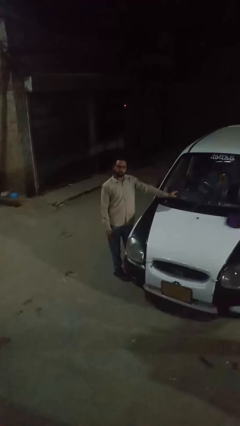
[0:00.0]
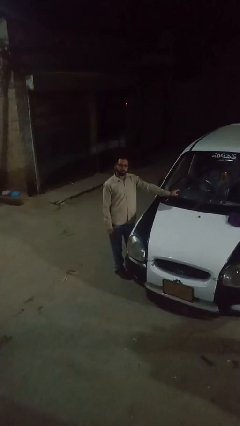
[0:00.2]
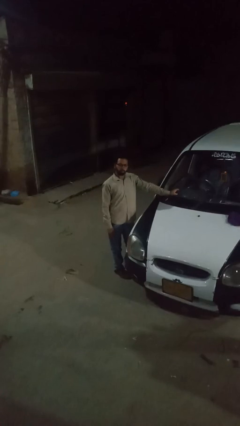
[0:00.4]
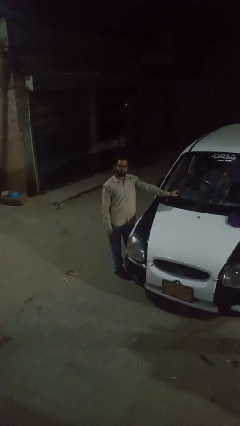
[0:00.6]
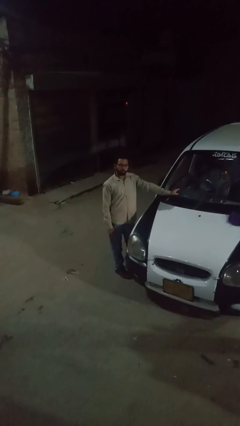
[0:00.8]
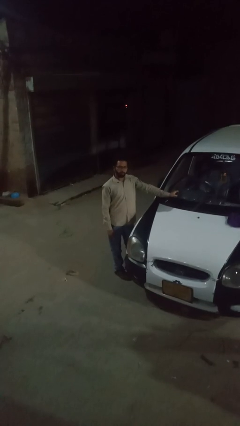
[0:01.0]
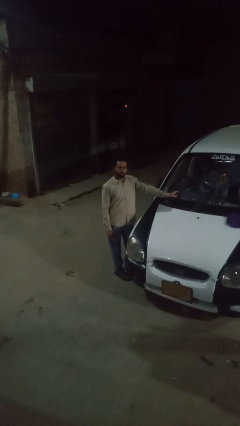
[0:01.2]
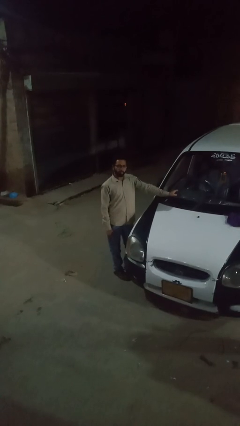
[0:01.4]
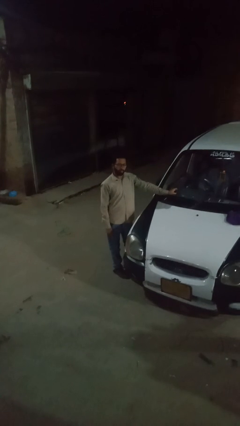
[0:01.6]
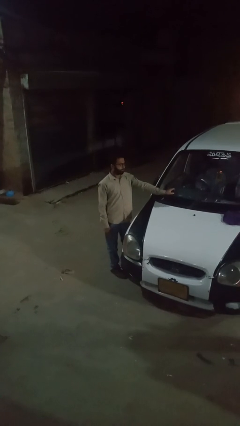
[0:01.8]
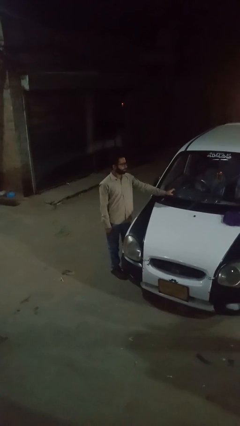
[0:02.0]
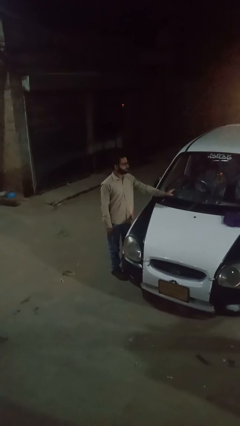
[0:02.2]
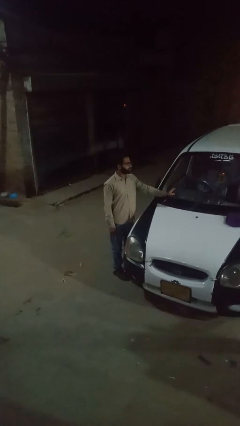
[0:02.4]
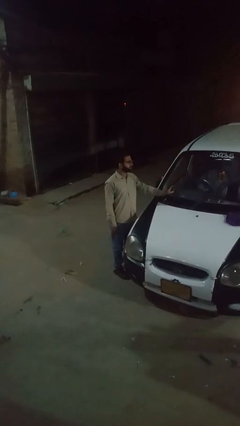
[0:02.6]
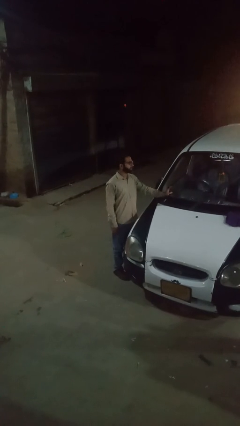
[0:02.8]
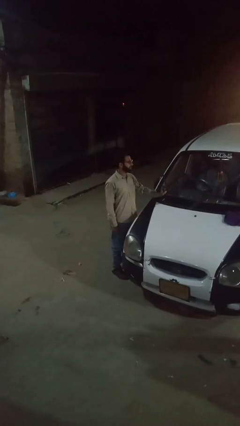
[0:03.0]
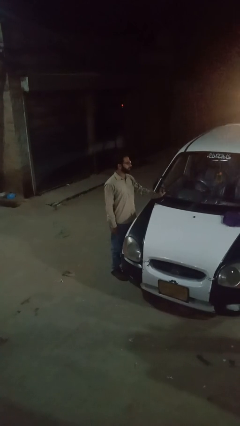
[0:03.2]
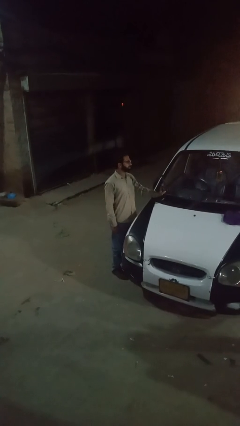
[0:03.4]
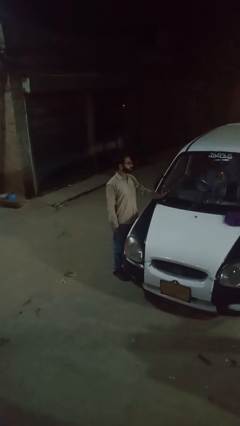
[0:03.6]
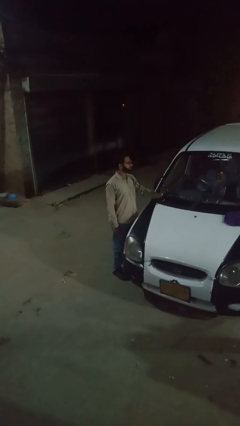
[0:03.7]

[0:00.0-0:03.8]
person flips up car wipers

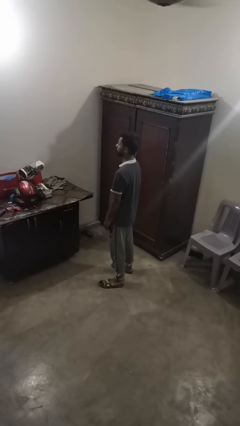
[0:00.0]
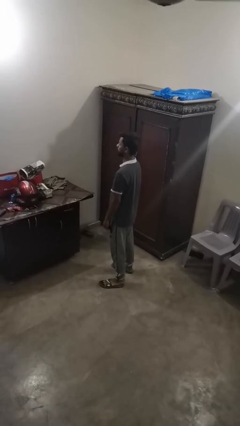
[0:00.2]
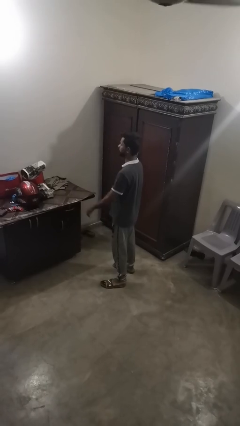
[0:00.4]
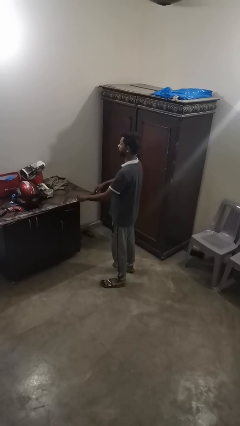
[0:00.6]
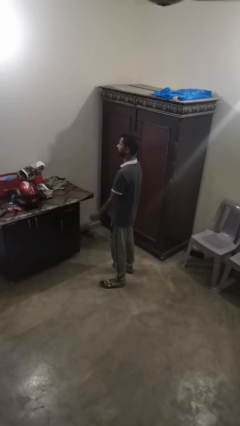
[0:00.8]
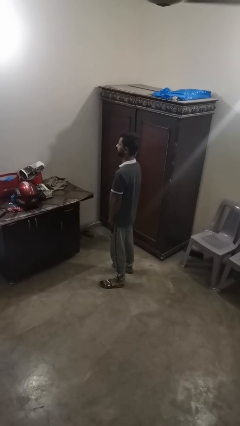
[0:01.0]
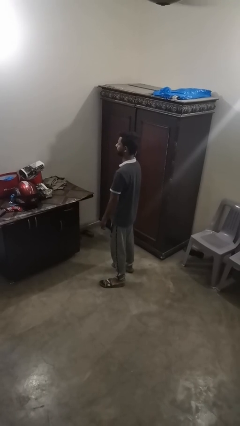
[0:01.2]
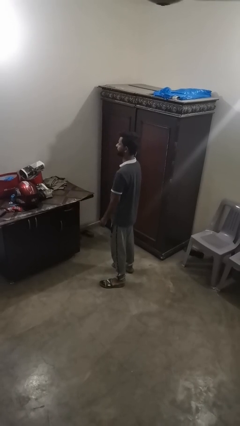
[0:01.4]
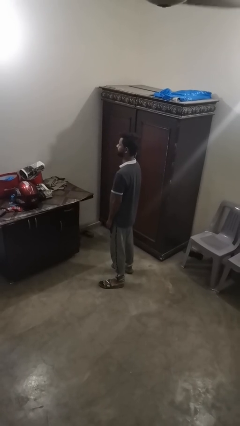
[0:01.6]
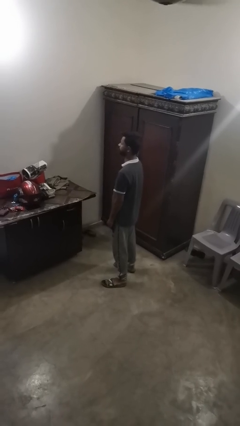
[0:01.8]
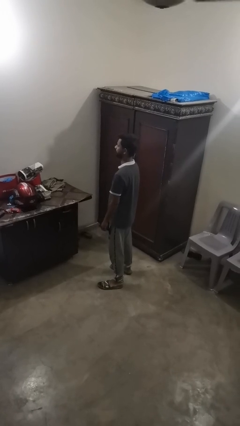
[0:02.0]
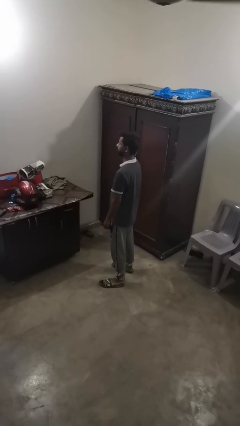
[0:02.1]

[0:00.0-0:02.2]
person slaps hands on thighs

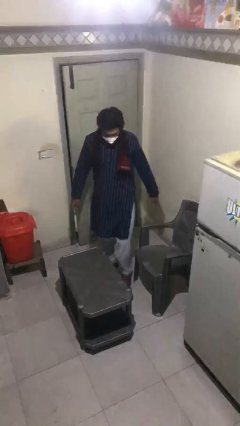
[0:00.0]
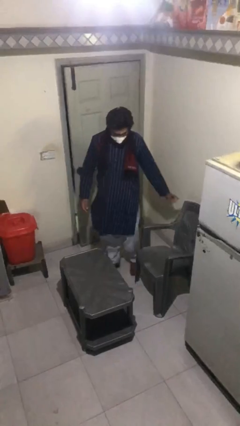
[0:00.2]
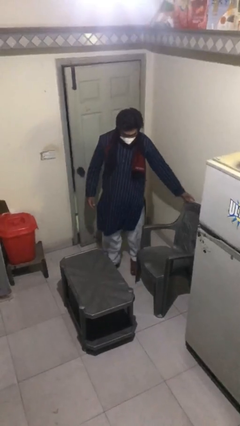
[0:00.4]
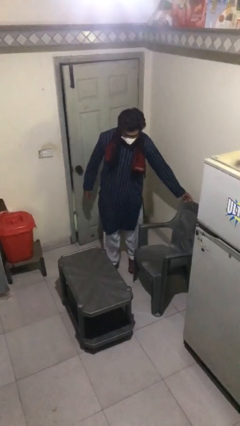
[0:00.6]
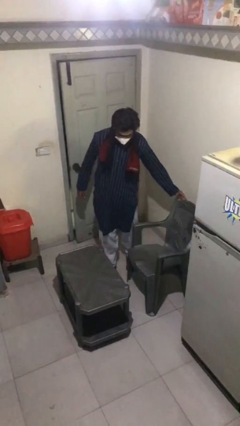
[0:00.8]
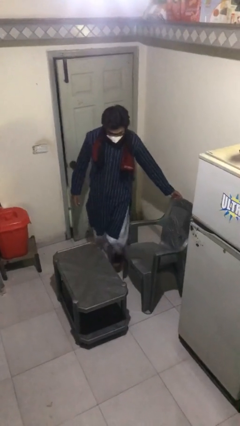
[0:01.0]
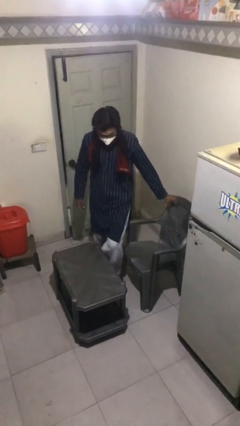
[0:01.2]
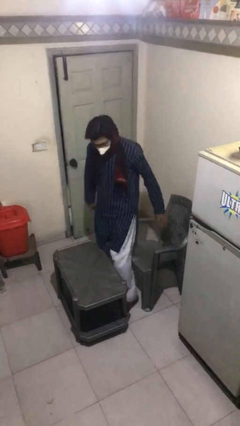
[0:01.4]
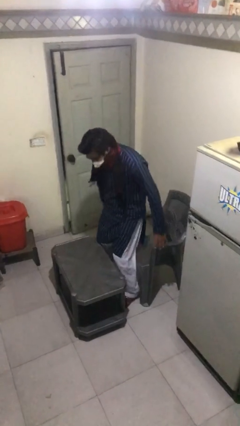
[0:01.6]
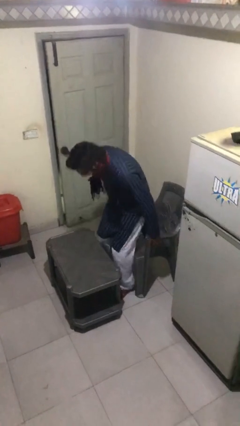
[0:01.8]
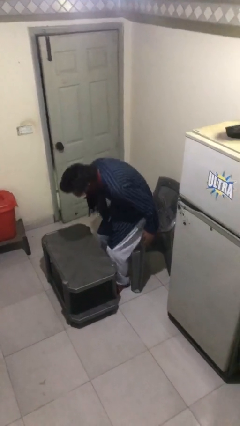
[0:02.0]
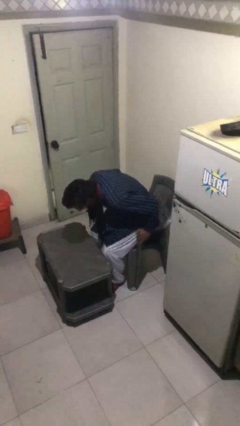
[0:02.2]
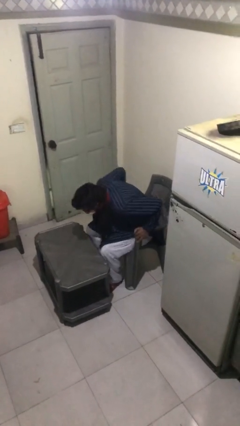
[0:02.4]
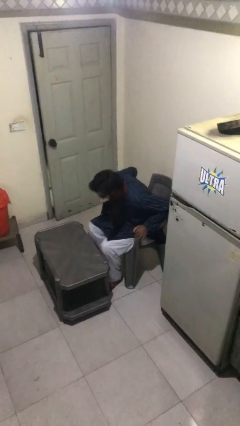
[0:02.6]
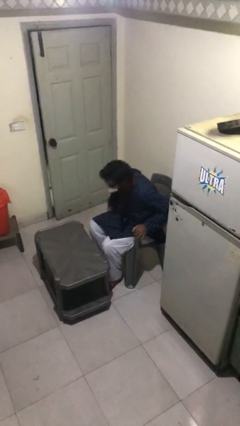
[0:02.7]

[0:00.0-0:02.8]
person sits down

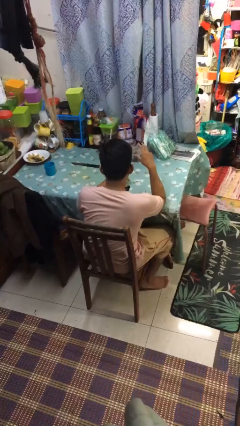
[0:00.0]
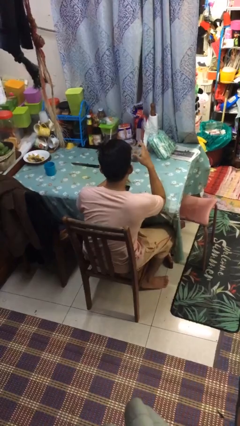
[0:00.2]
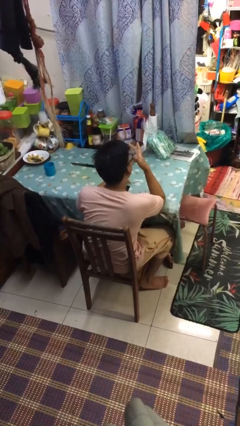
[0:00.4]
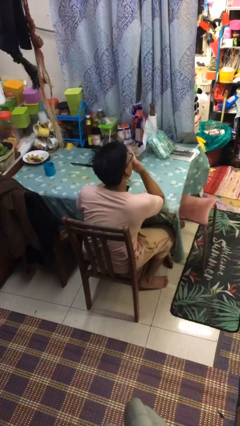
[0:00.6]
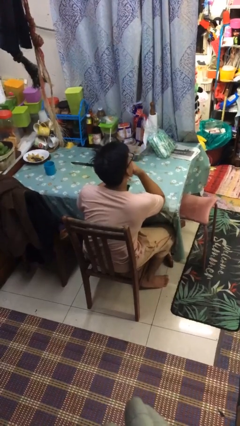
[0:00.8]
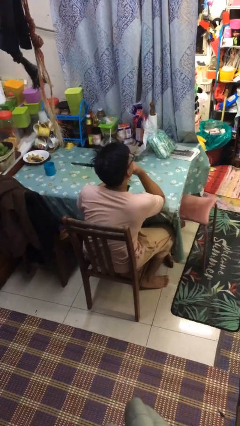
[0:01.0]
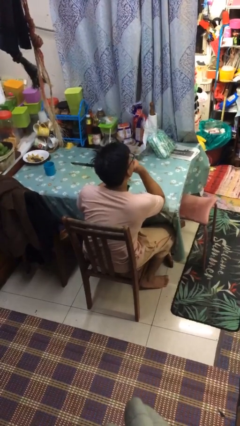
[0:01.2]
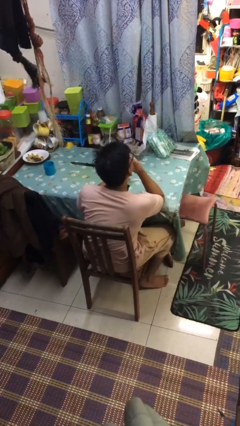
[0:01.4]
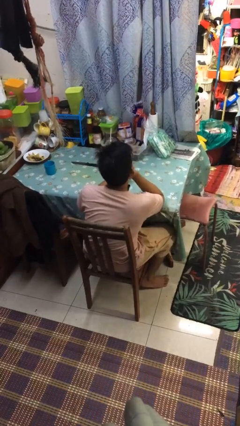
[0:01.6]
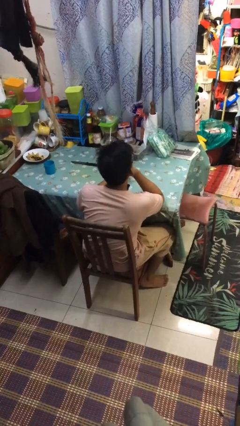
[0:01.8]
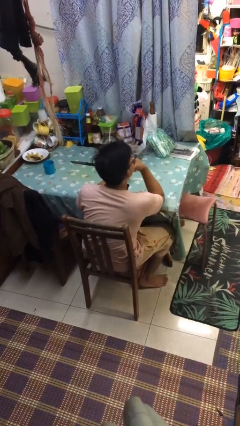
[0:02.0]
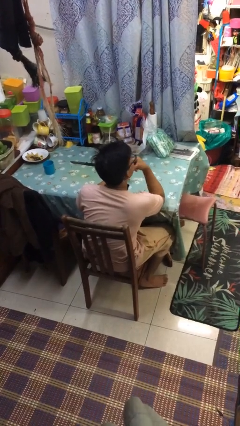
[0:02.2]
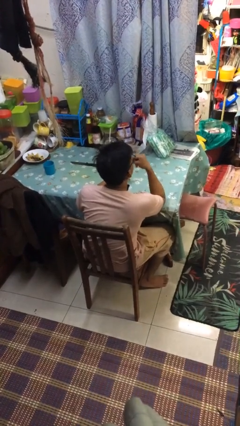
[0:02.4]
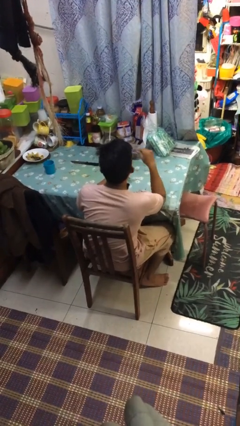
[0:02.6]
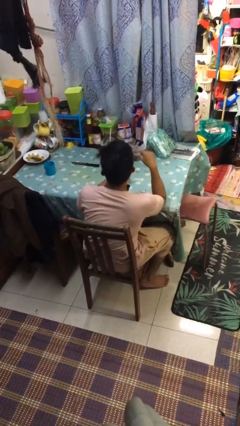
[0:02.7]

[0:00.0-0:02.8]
person strokes chin

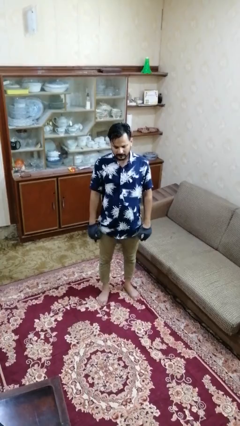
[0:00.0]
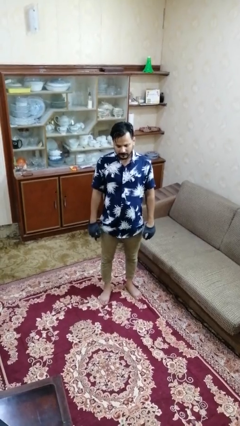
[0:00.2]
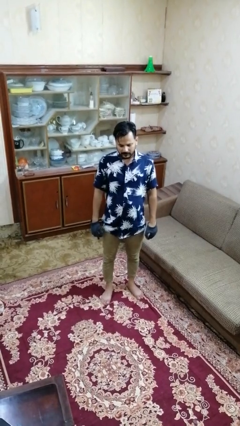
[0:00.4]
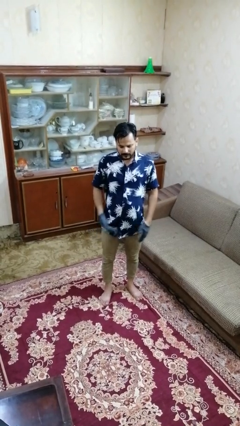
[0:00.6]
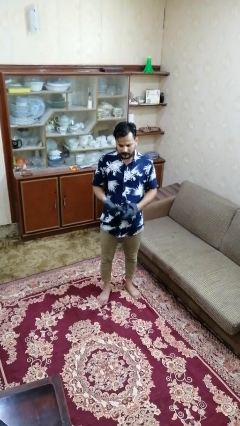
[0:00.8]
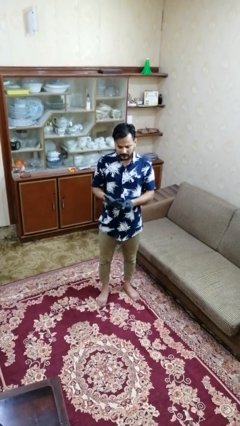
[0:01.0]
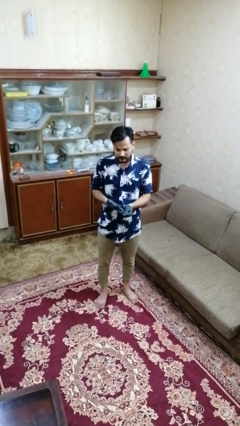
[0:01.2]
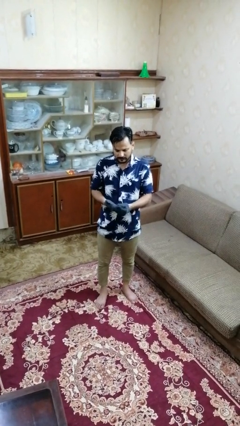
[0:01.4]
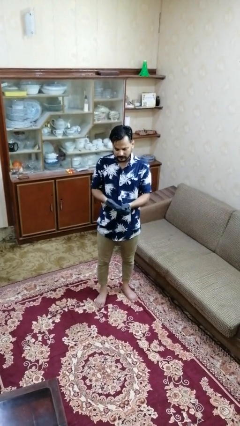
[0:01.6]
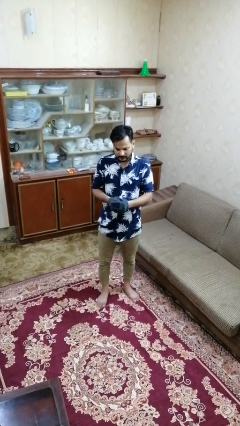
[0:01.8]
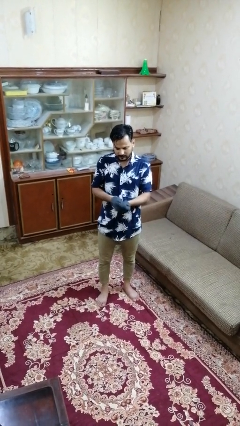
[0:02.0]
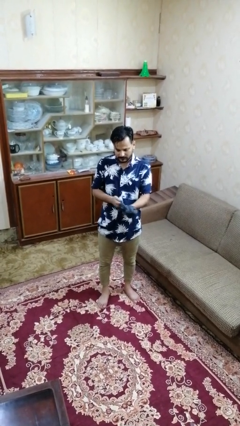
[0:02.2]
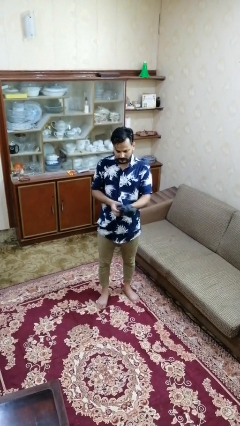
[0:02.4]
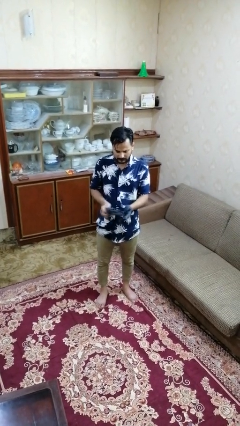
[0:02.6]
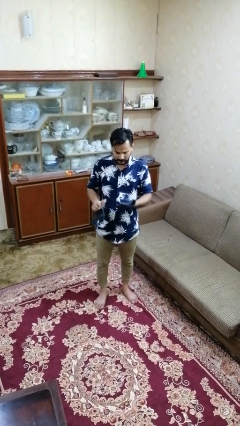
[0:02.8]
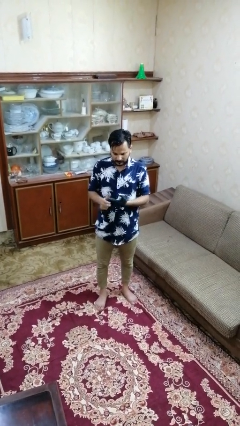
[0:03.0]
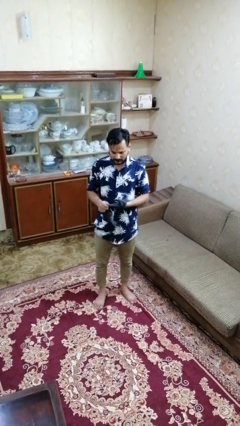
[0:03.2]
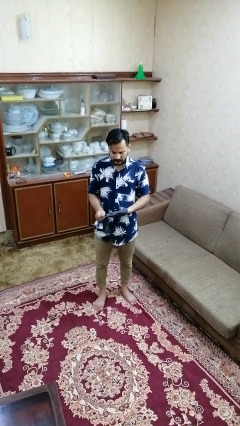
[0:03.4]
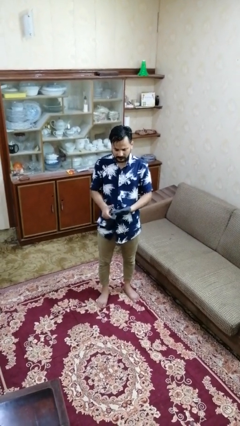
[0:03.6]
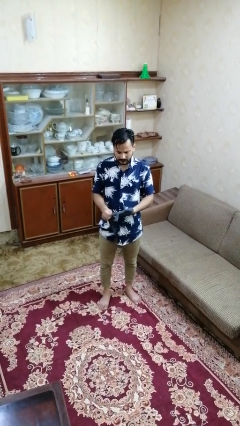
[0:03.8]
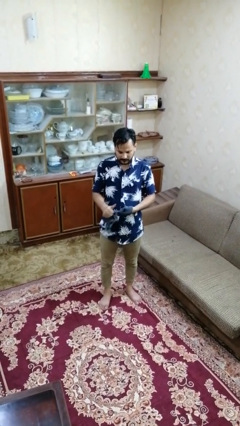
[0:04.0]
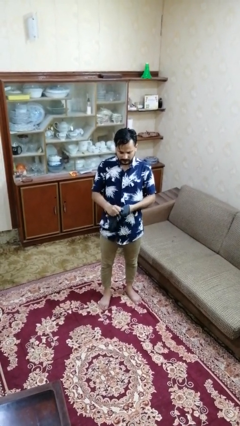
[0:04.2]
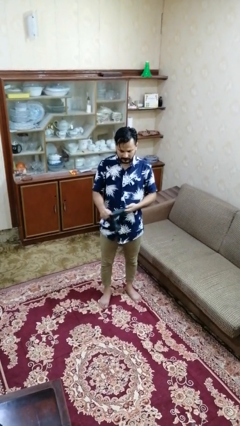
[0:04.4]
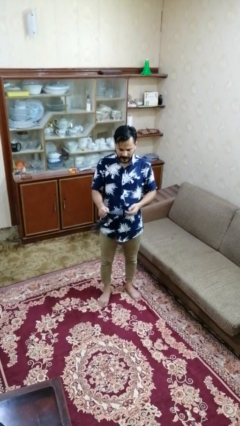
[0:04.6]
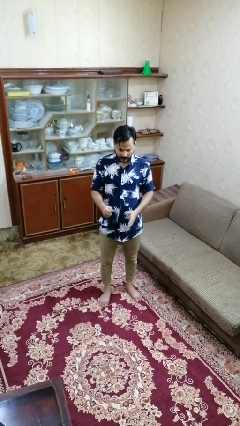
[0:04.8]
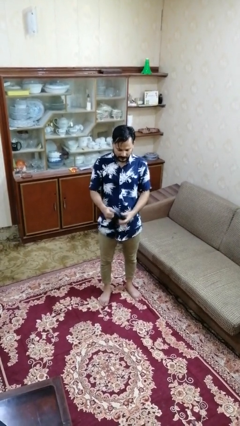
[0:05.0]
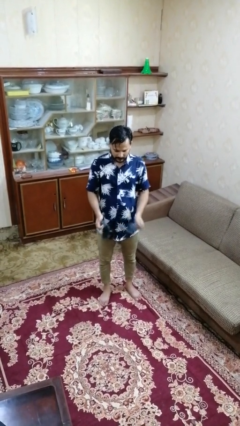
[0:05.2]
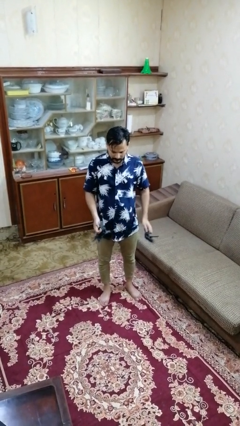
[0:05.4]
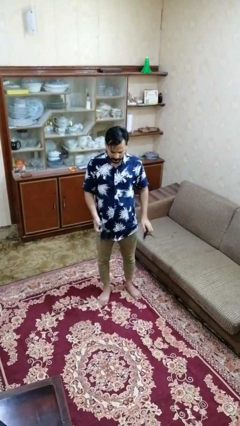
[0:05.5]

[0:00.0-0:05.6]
person takes off gloves

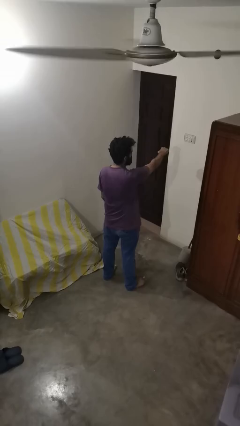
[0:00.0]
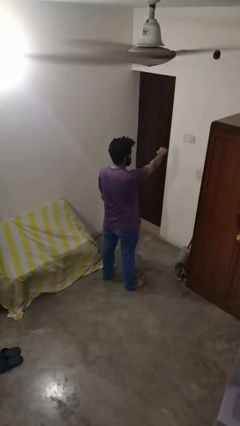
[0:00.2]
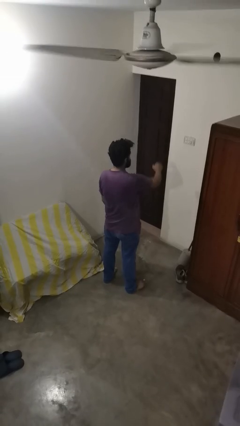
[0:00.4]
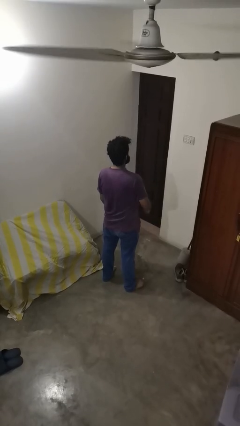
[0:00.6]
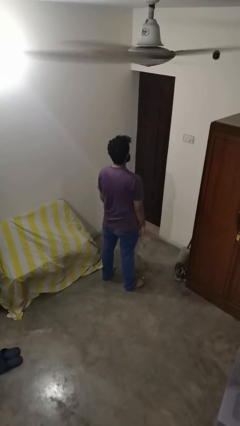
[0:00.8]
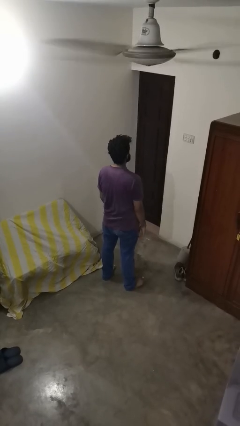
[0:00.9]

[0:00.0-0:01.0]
person punches
